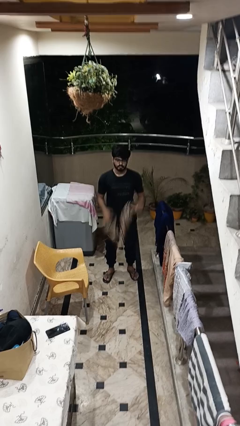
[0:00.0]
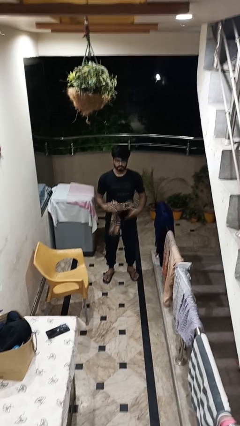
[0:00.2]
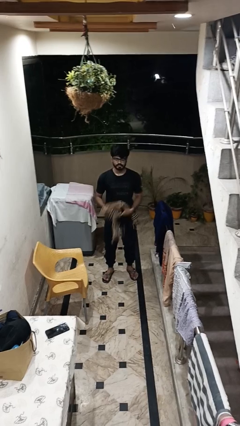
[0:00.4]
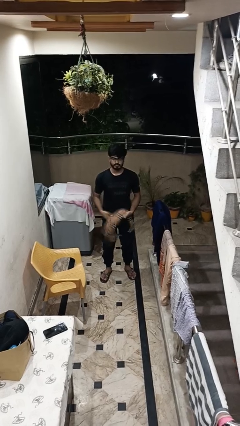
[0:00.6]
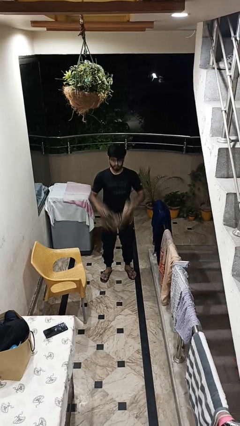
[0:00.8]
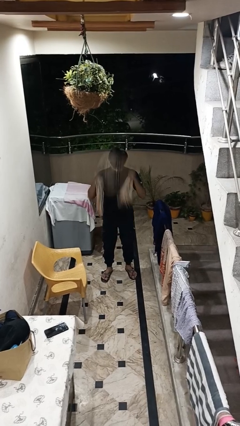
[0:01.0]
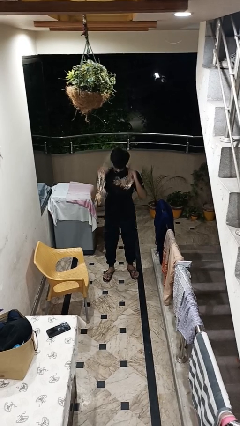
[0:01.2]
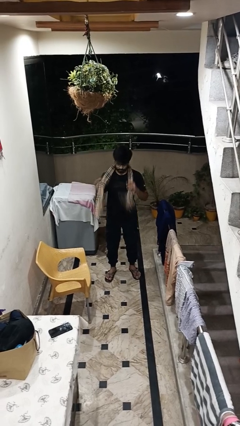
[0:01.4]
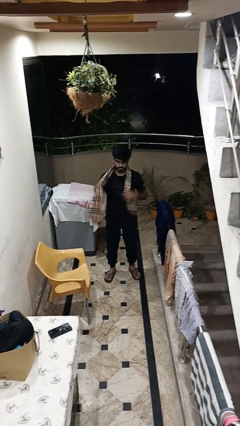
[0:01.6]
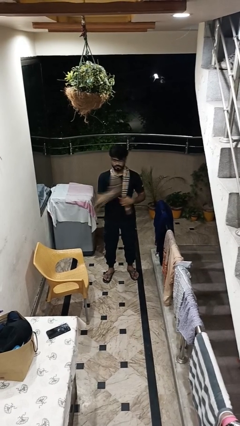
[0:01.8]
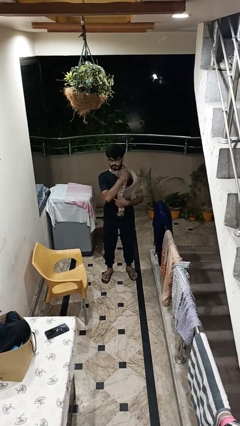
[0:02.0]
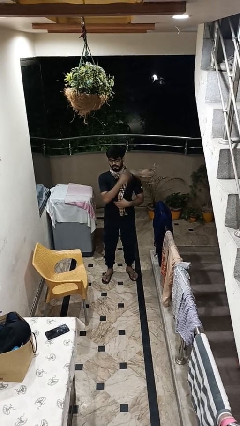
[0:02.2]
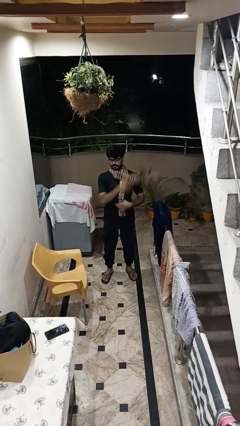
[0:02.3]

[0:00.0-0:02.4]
person puts on scarf

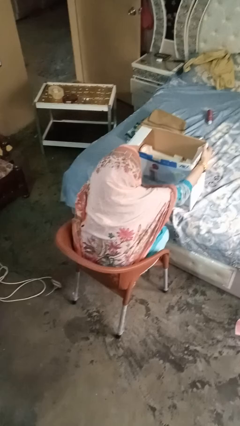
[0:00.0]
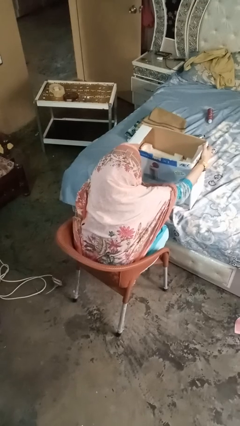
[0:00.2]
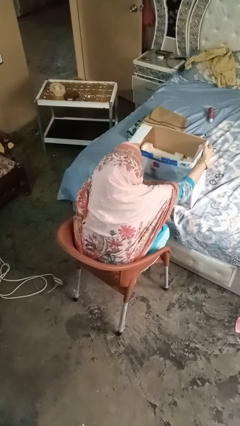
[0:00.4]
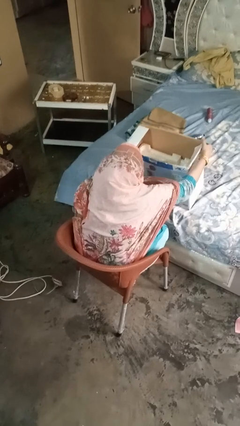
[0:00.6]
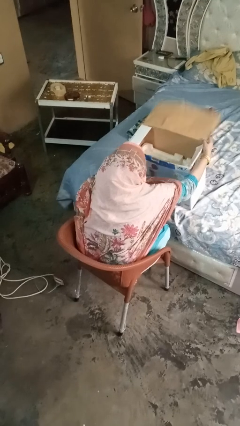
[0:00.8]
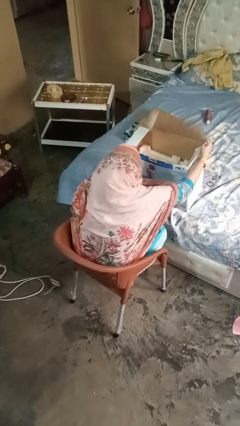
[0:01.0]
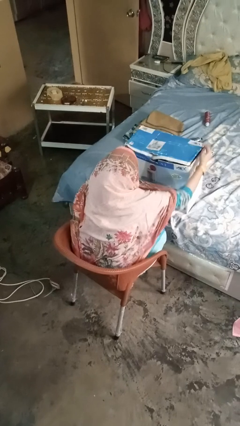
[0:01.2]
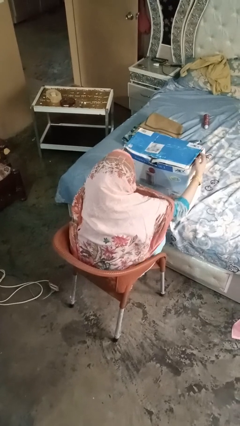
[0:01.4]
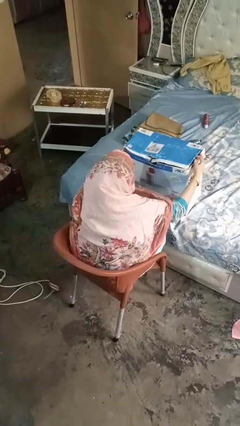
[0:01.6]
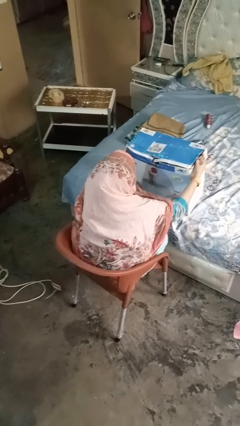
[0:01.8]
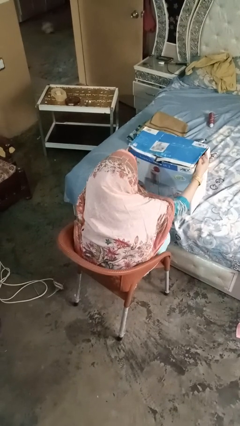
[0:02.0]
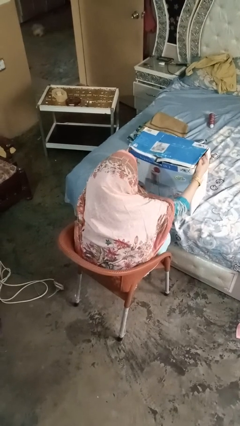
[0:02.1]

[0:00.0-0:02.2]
person closes box

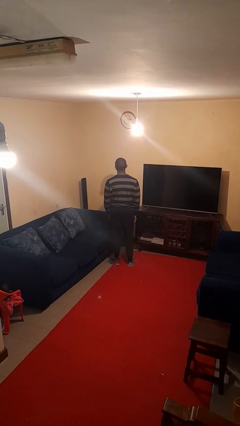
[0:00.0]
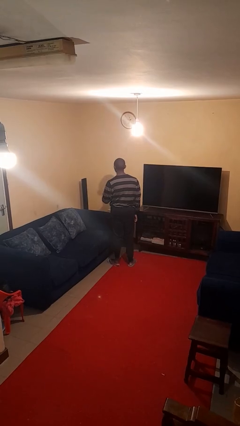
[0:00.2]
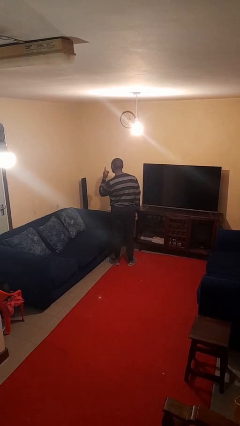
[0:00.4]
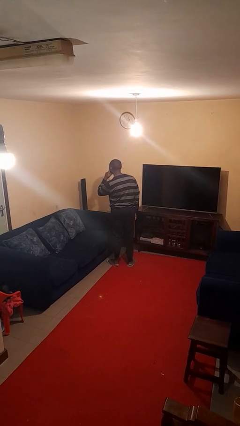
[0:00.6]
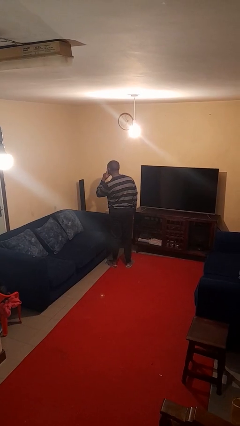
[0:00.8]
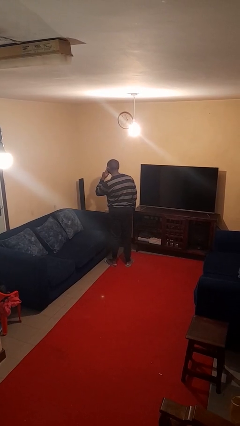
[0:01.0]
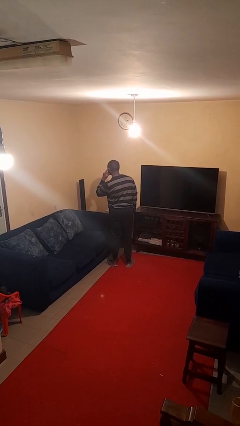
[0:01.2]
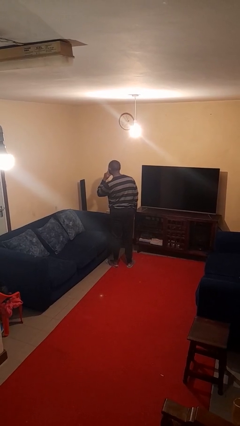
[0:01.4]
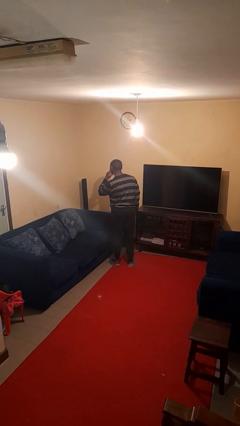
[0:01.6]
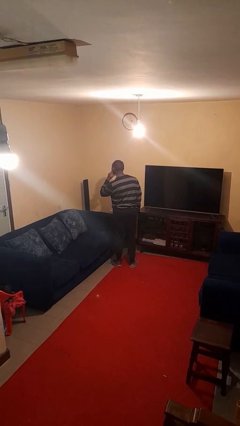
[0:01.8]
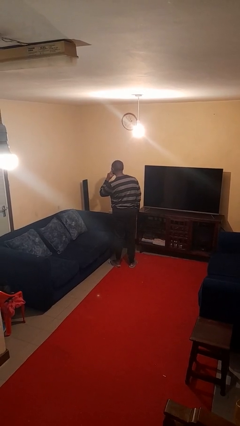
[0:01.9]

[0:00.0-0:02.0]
person gestures listen closely

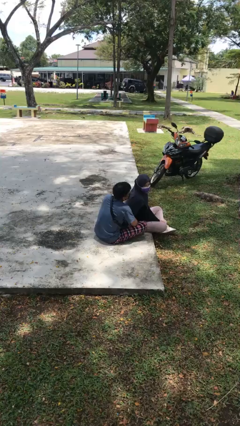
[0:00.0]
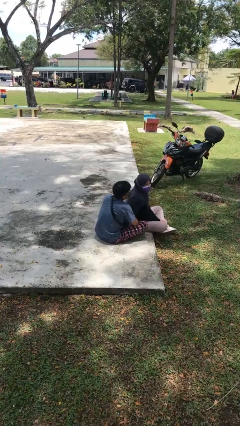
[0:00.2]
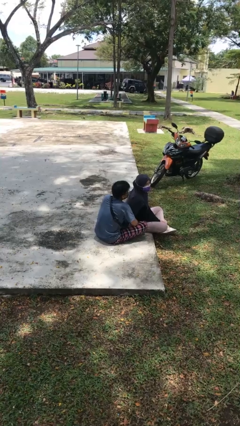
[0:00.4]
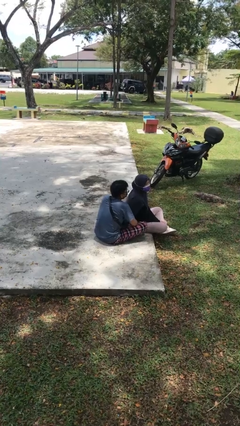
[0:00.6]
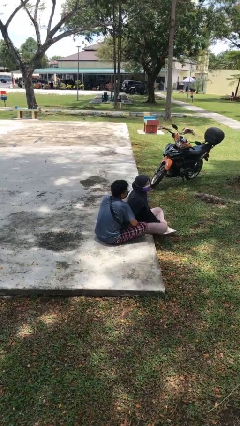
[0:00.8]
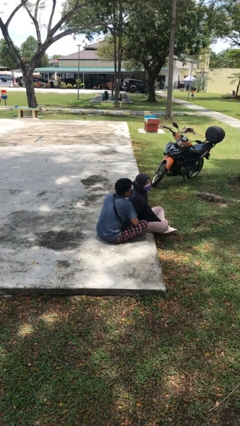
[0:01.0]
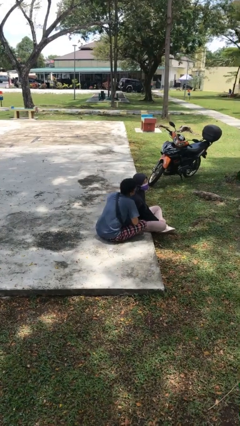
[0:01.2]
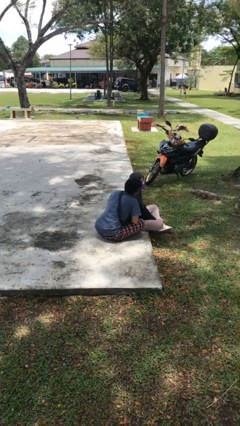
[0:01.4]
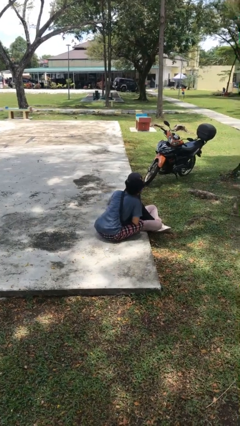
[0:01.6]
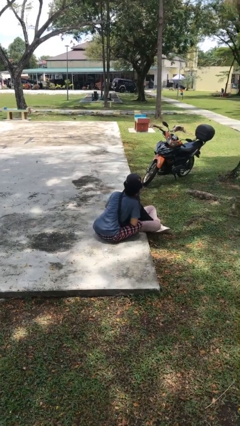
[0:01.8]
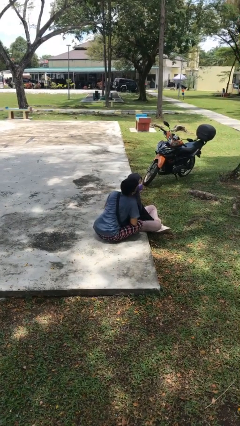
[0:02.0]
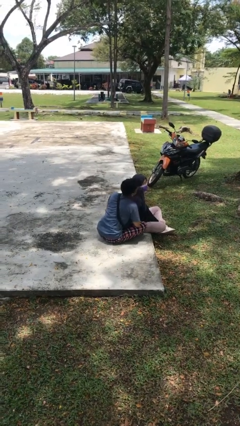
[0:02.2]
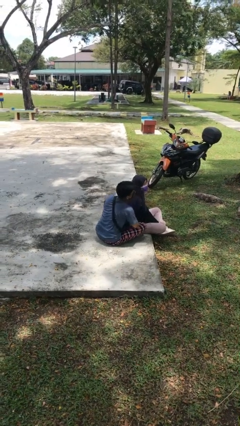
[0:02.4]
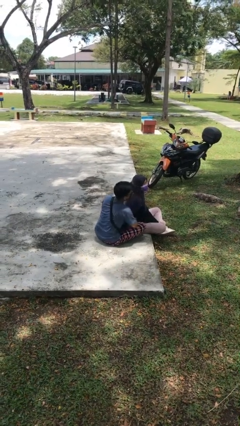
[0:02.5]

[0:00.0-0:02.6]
person kisses cheek of person

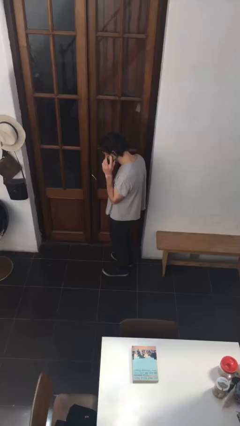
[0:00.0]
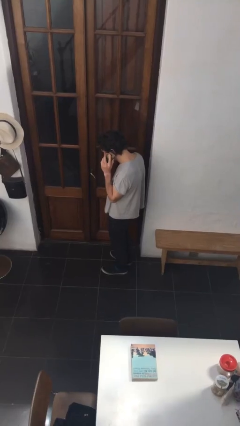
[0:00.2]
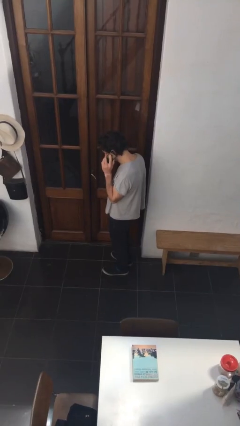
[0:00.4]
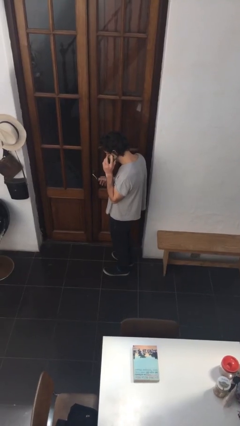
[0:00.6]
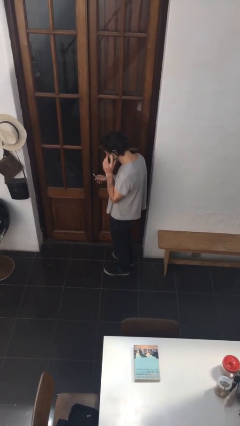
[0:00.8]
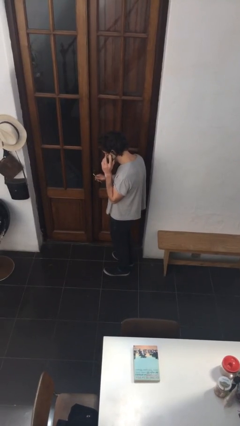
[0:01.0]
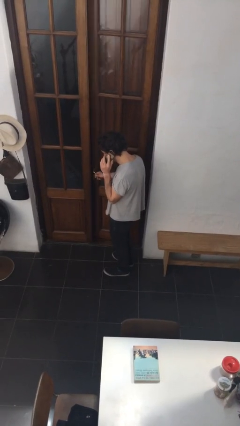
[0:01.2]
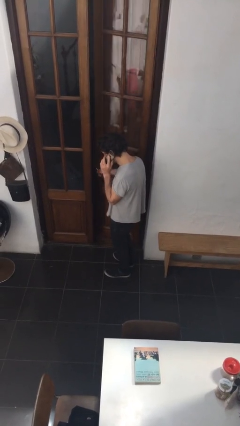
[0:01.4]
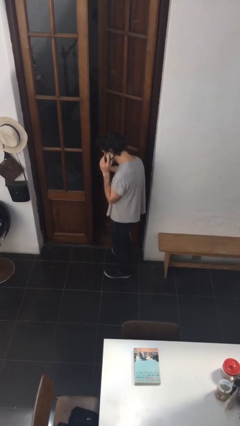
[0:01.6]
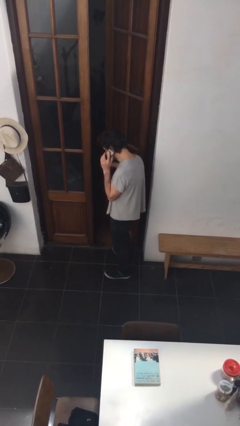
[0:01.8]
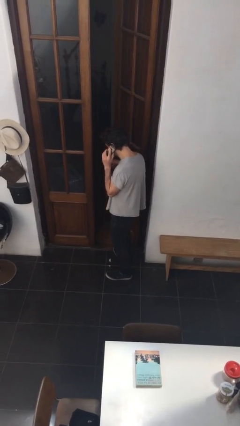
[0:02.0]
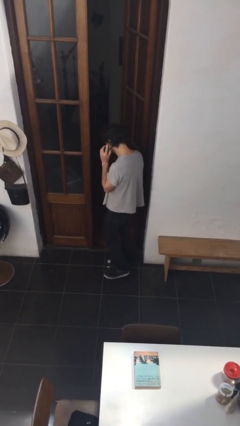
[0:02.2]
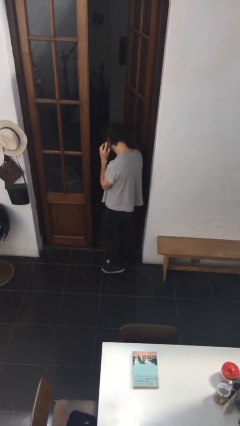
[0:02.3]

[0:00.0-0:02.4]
person opens facility door

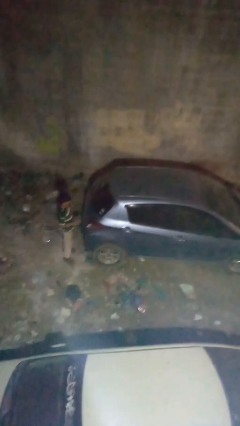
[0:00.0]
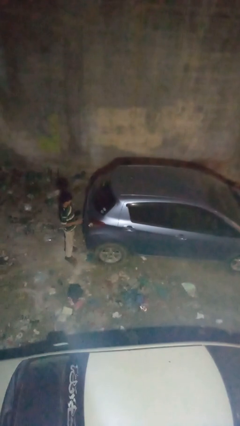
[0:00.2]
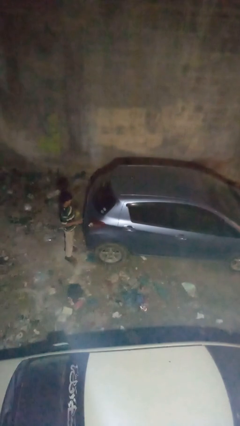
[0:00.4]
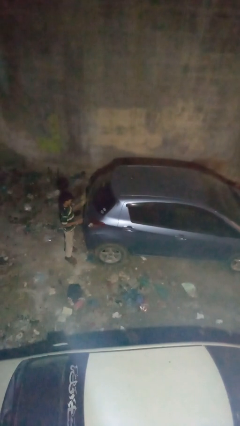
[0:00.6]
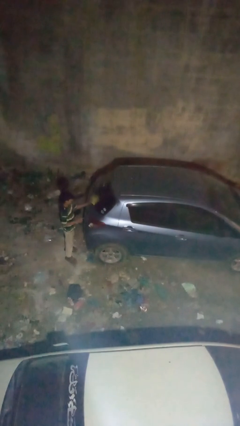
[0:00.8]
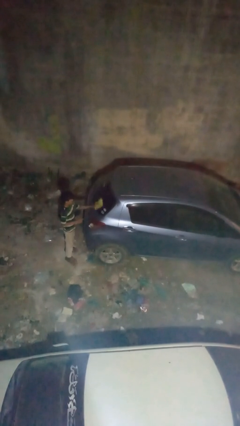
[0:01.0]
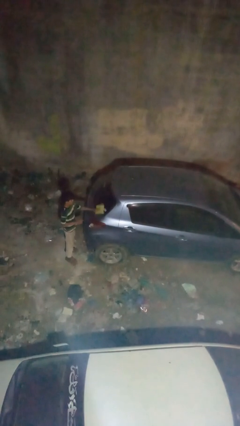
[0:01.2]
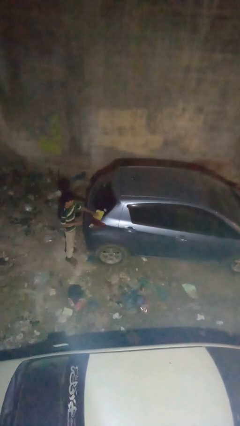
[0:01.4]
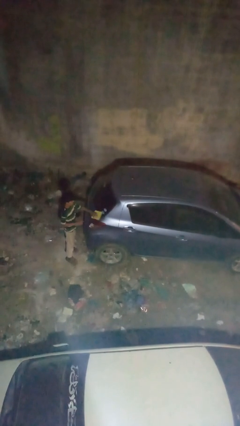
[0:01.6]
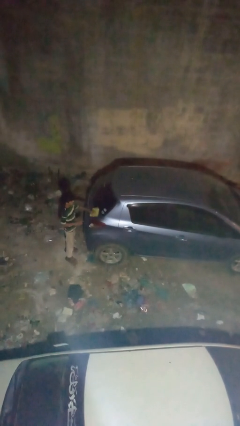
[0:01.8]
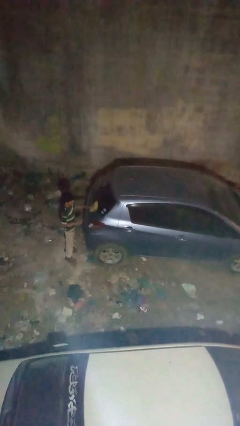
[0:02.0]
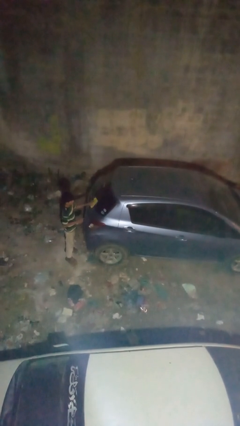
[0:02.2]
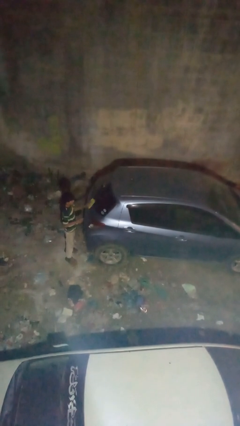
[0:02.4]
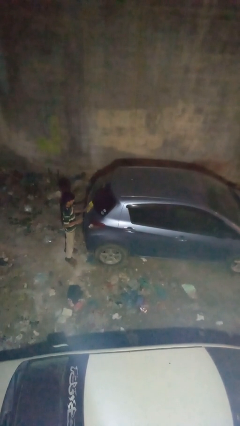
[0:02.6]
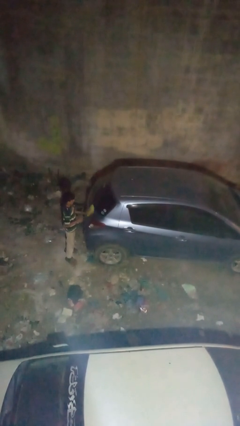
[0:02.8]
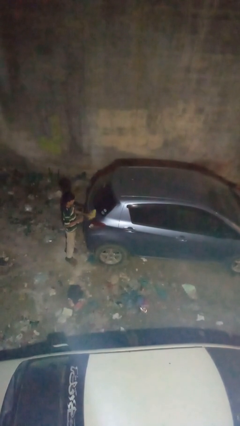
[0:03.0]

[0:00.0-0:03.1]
person polishes car with rag

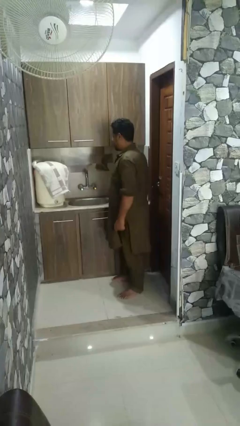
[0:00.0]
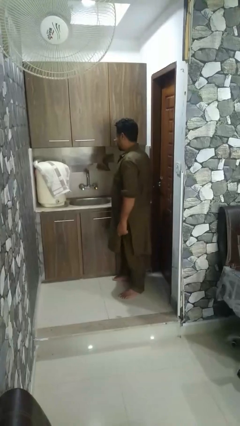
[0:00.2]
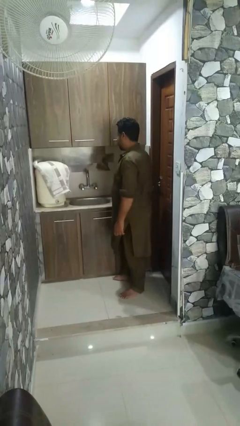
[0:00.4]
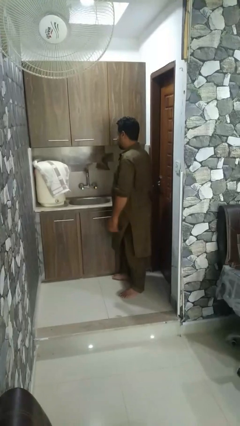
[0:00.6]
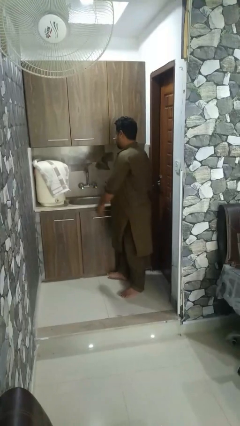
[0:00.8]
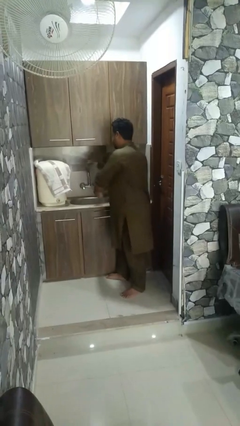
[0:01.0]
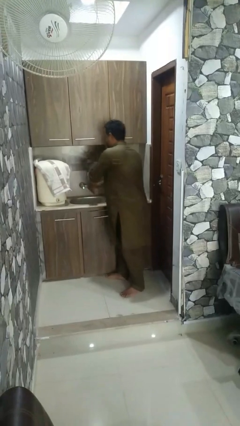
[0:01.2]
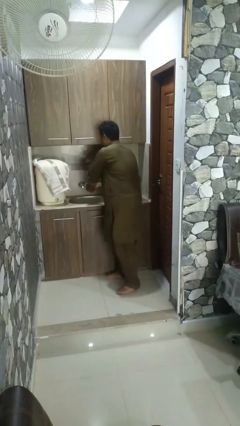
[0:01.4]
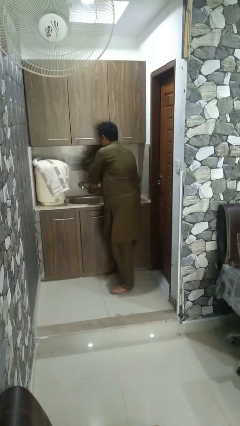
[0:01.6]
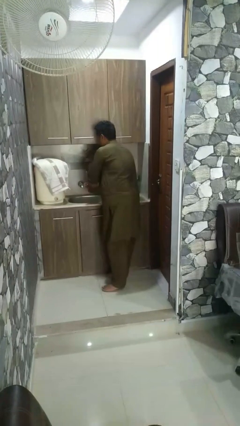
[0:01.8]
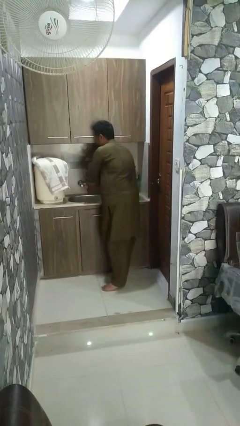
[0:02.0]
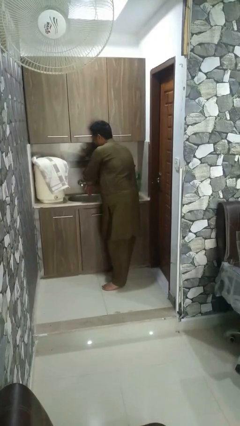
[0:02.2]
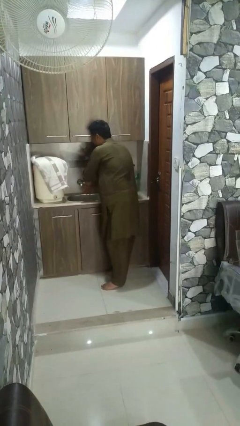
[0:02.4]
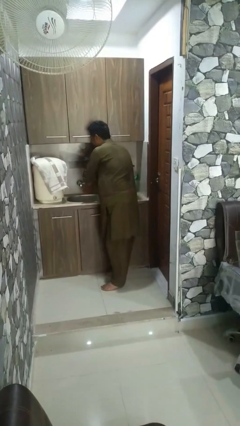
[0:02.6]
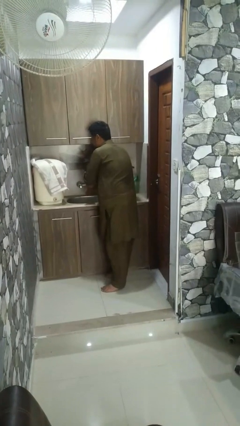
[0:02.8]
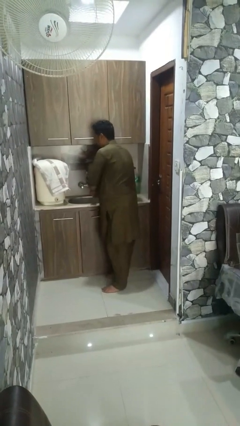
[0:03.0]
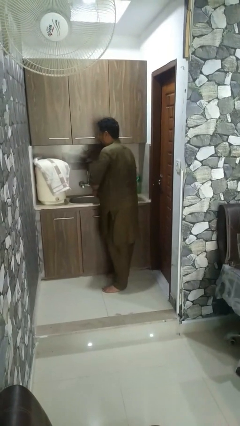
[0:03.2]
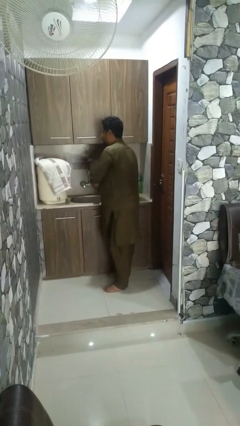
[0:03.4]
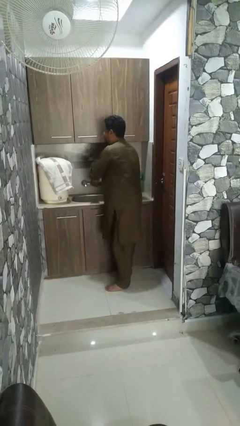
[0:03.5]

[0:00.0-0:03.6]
person washes hands
